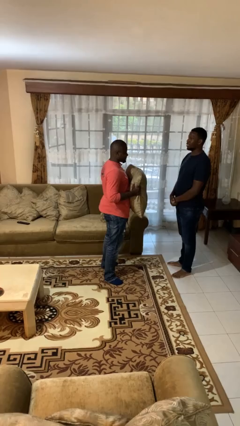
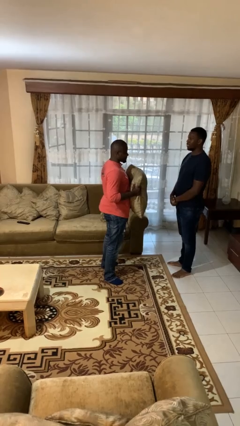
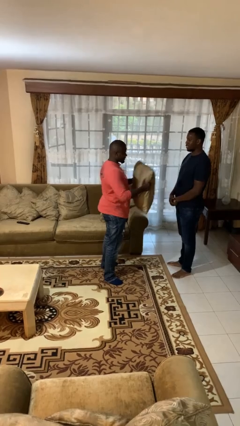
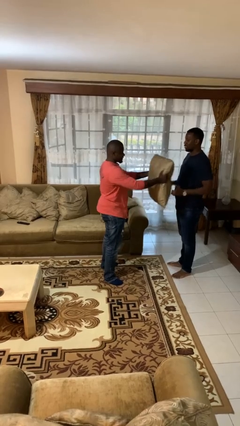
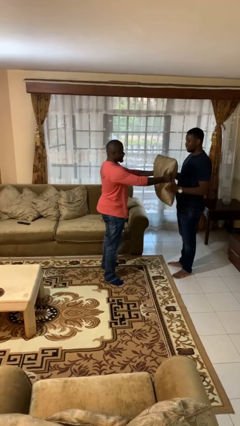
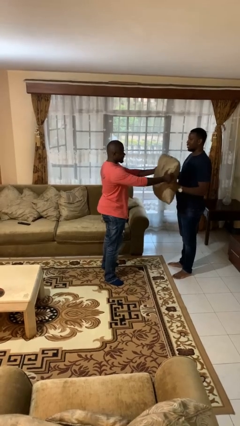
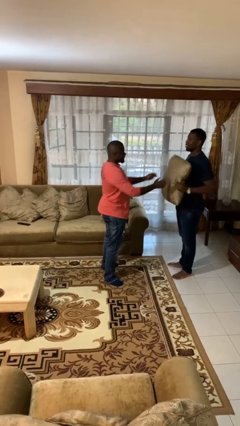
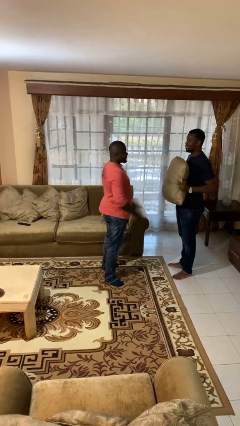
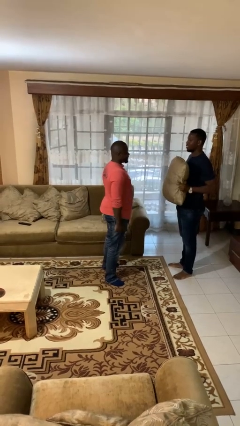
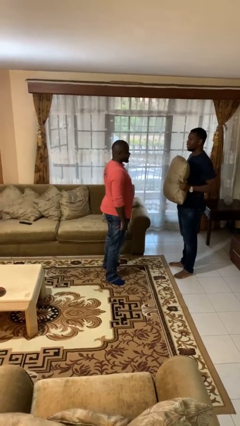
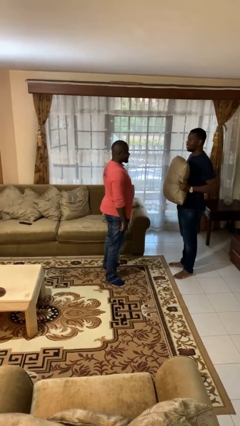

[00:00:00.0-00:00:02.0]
person transfers object to person

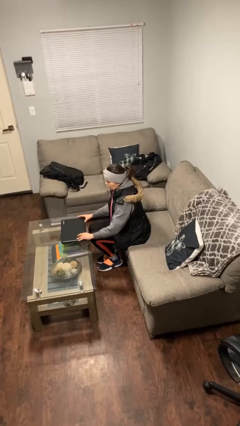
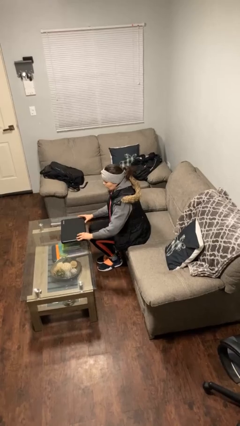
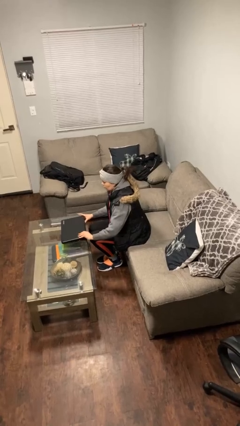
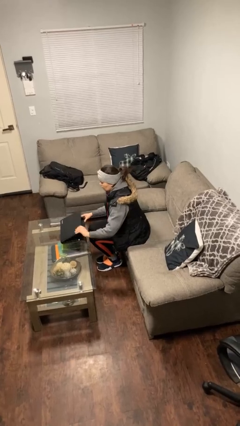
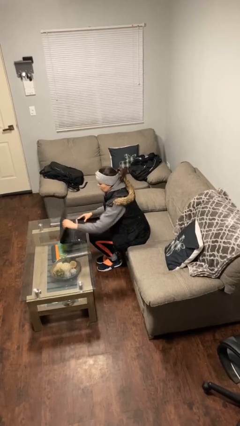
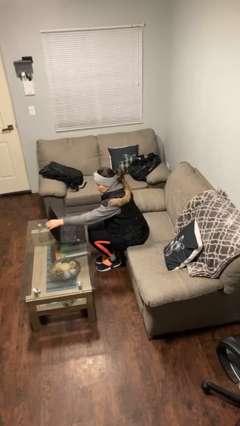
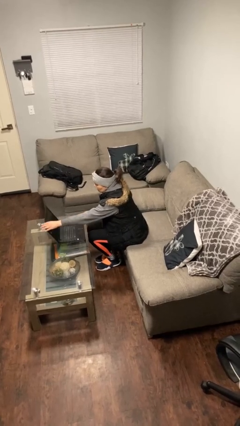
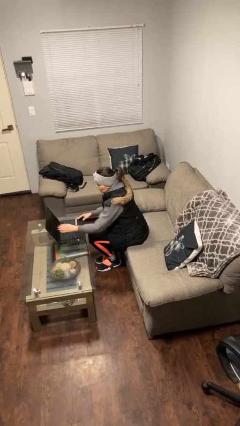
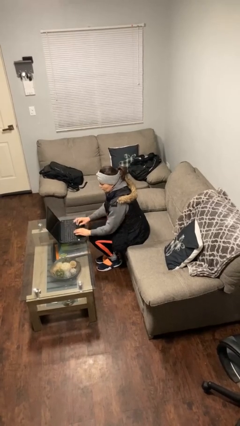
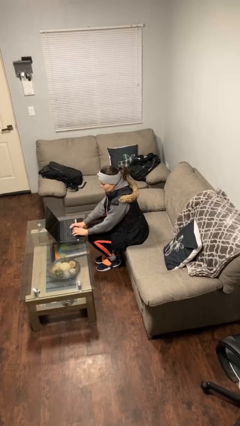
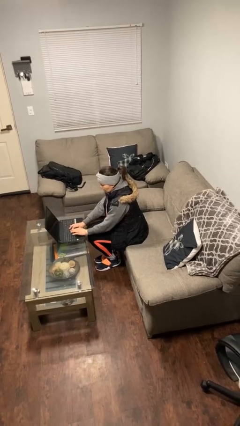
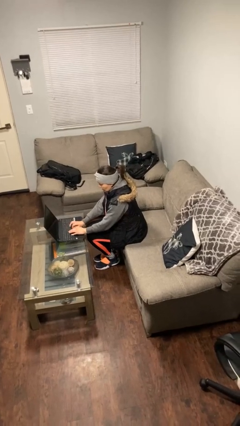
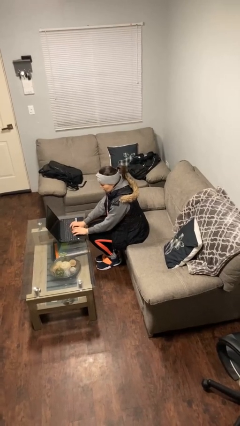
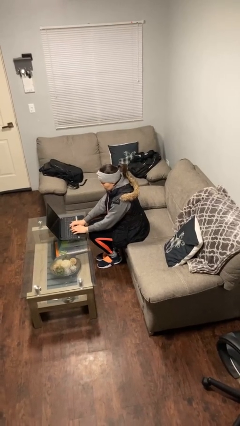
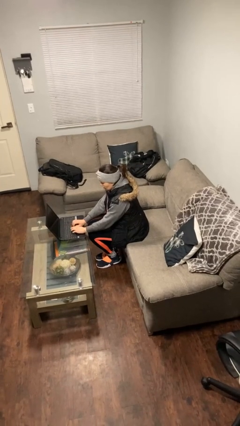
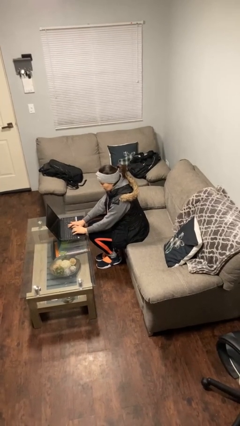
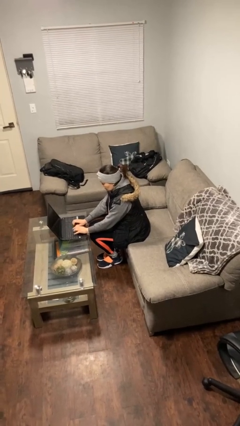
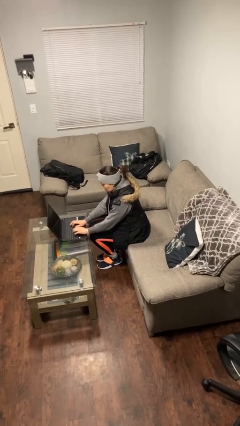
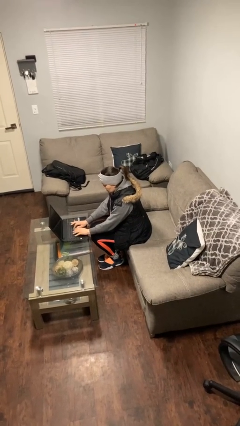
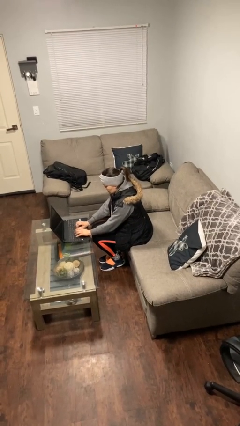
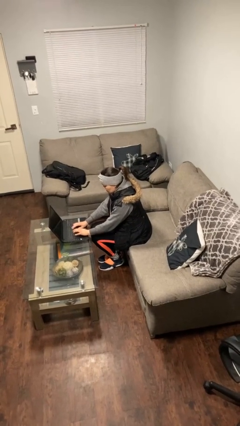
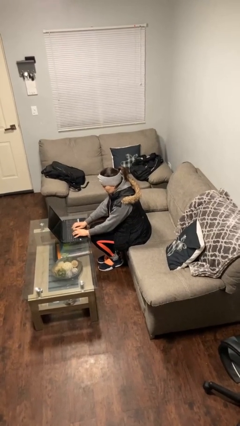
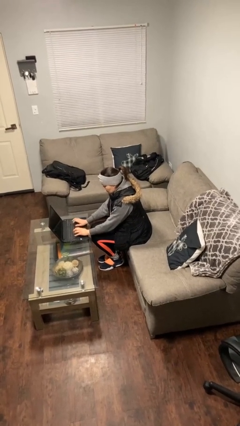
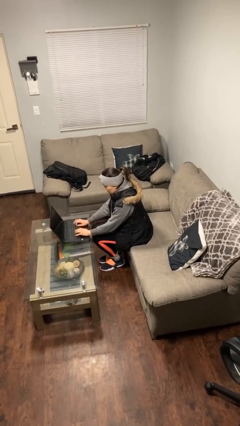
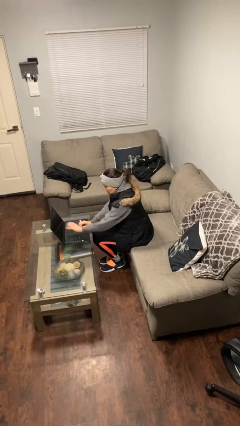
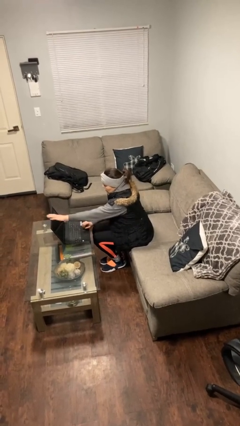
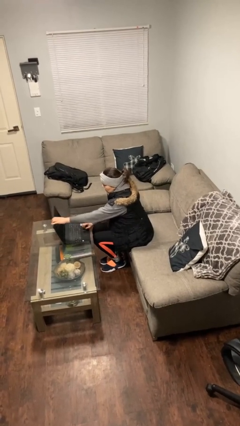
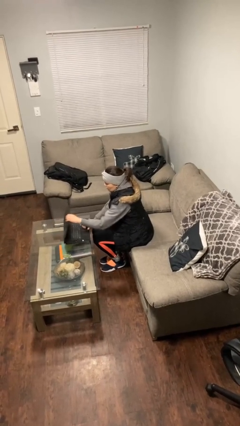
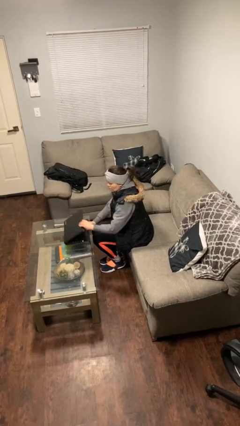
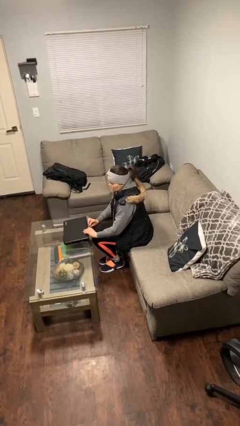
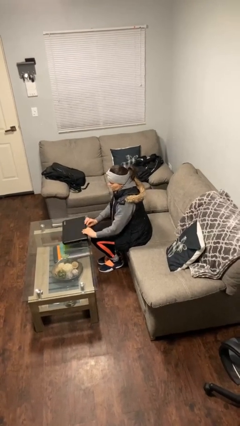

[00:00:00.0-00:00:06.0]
person interacts with laptop

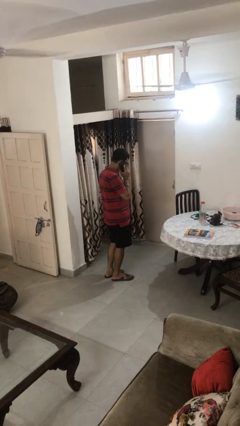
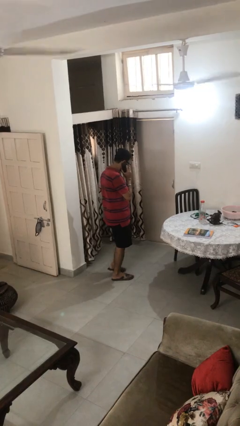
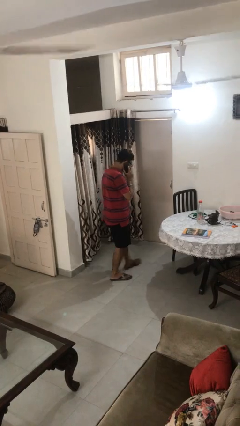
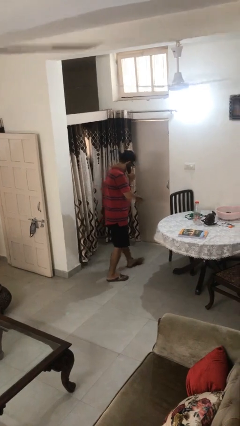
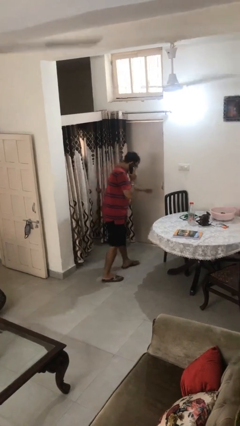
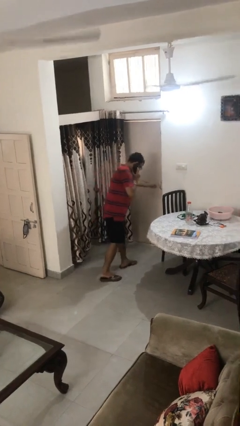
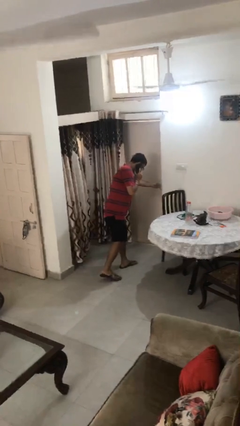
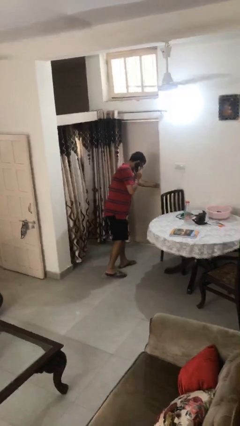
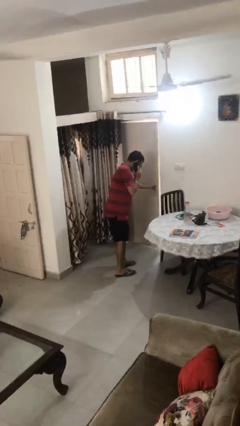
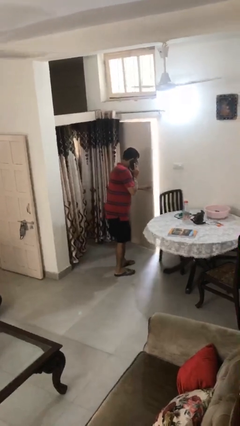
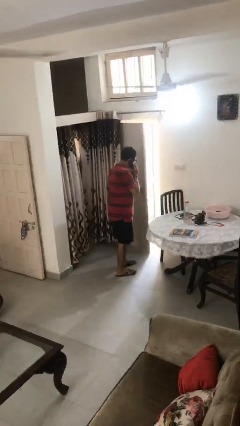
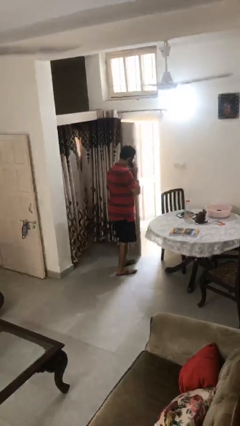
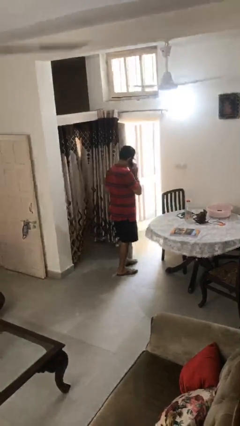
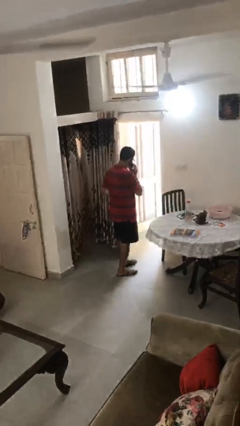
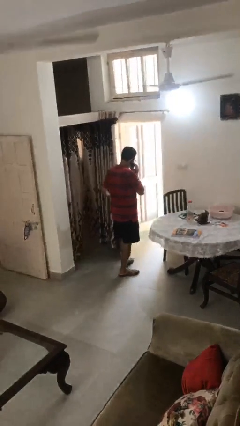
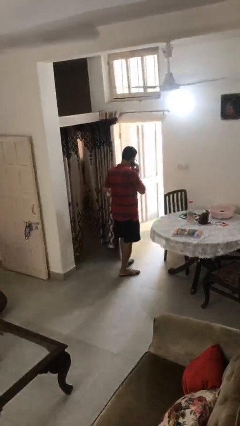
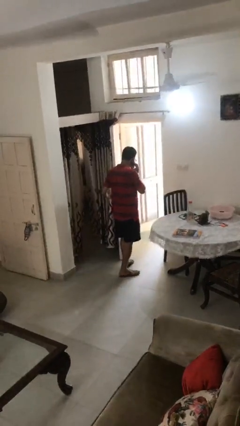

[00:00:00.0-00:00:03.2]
person opens facility door

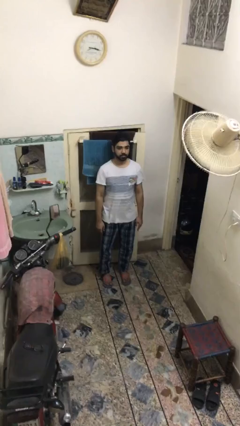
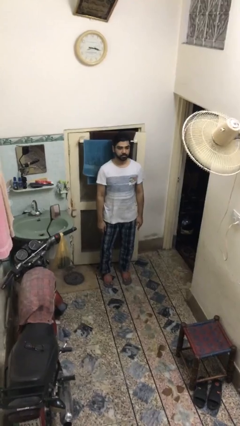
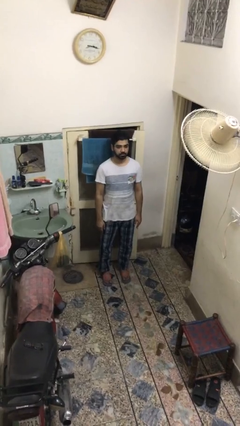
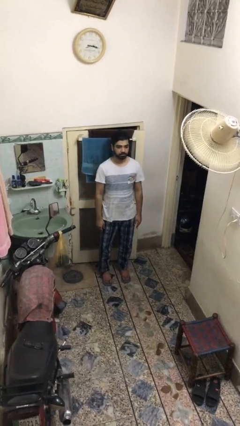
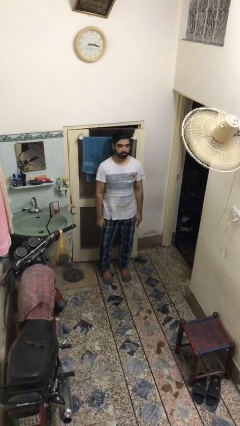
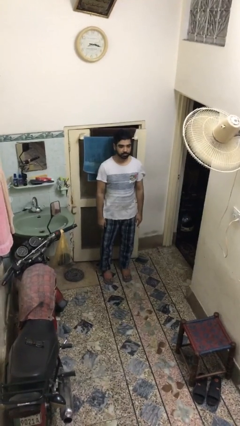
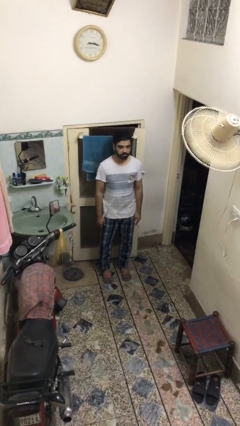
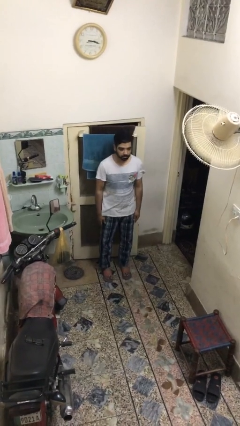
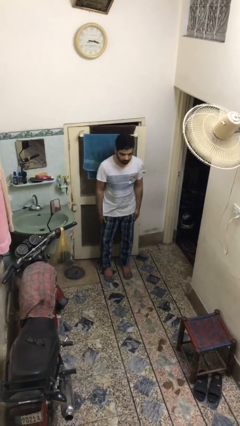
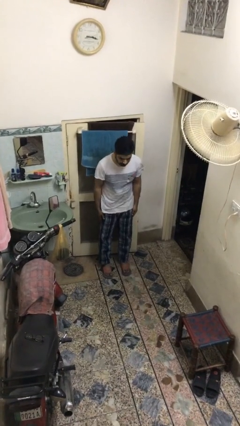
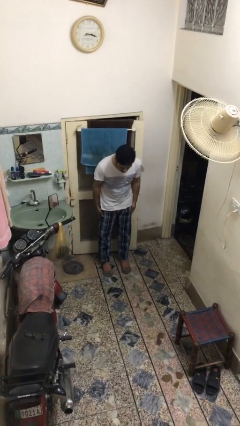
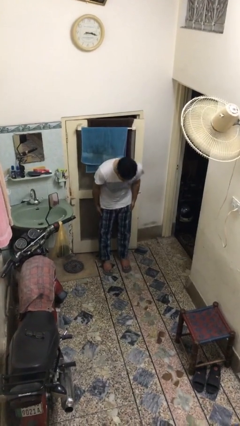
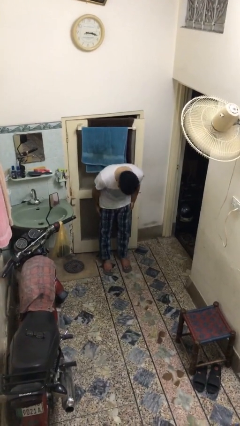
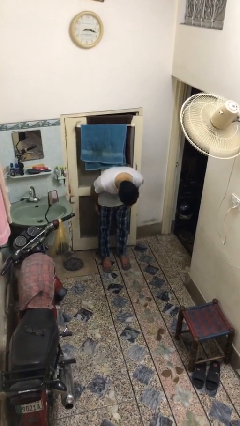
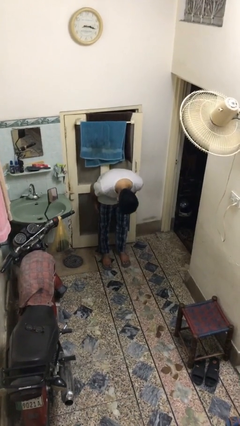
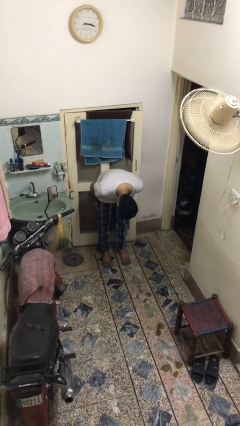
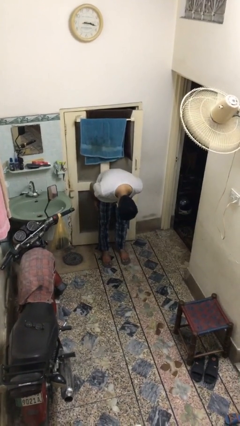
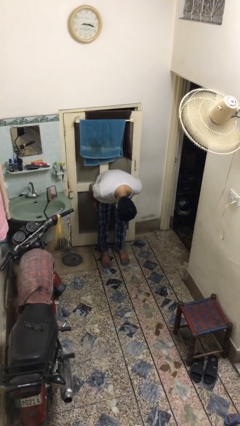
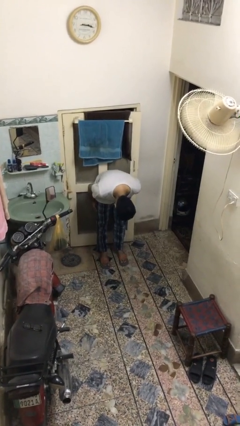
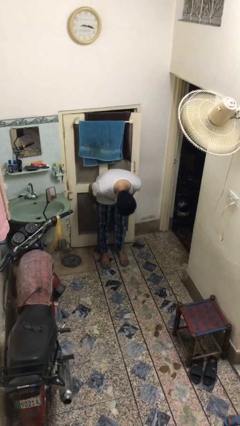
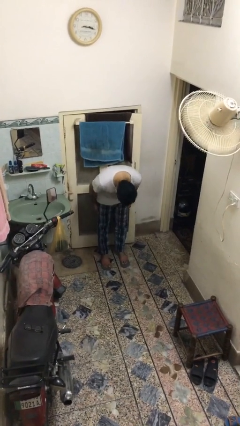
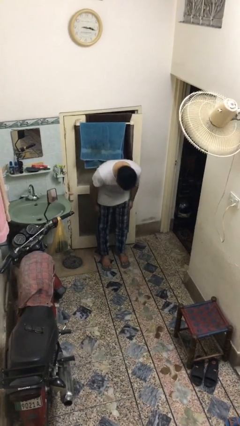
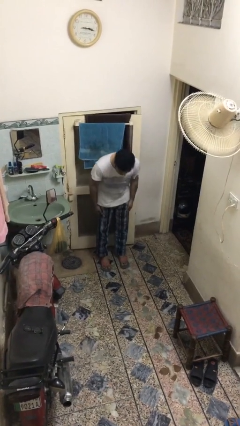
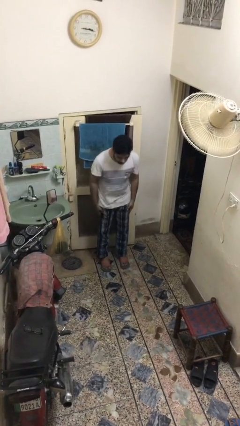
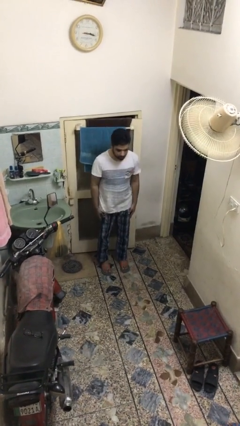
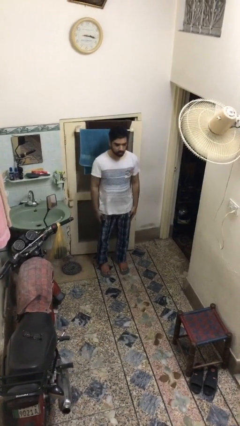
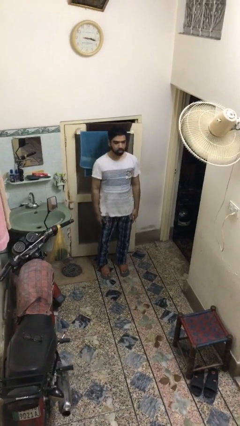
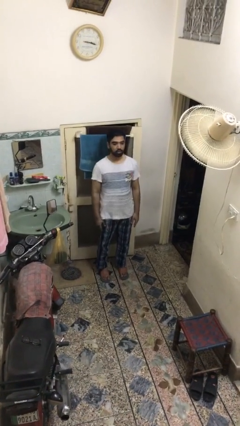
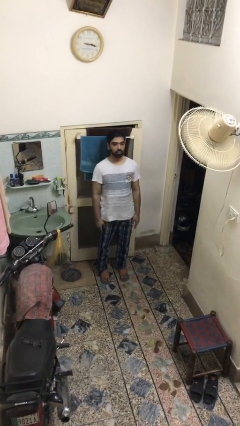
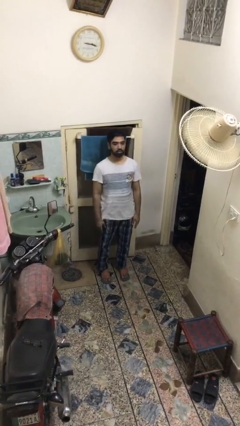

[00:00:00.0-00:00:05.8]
person bows

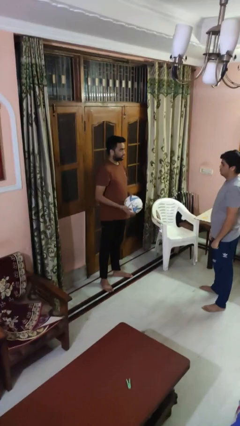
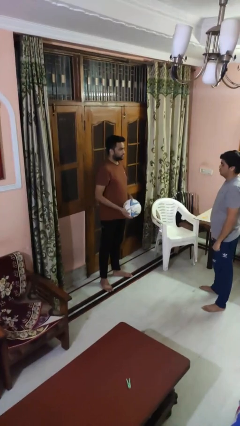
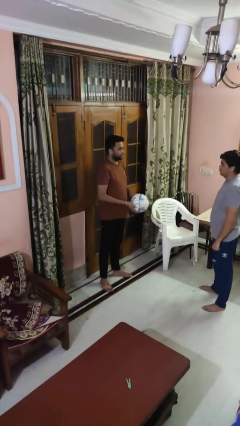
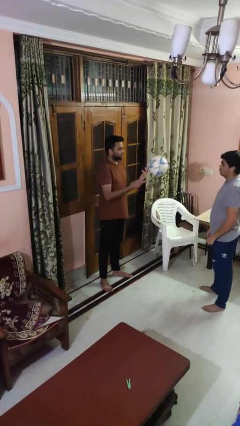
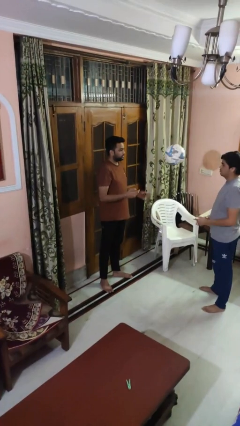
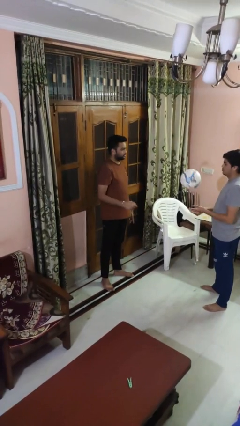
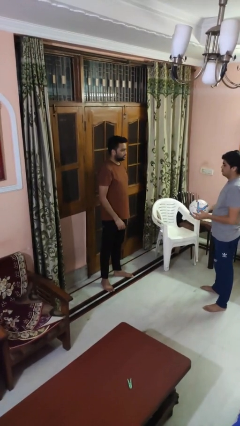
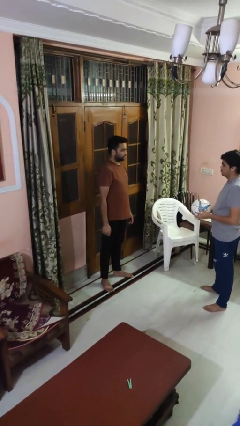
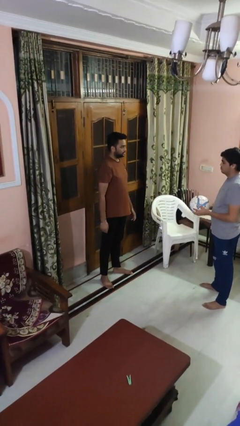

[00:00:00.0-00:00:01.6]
person throws object to person
